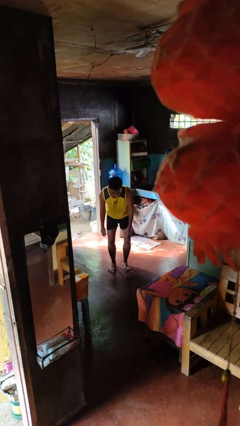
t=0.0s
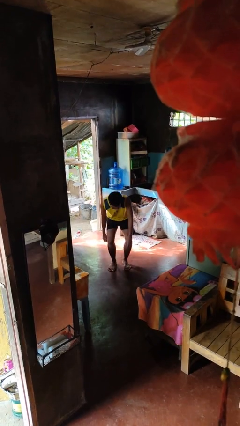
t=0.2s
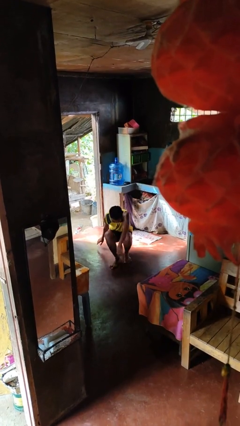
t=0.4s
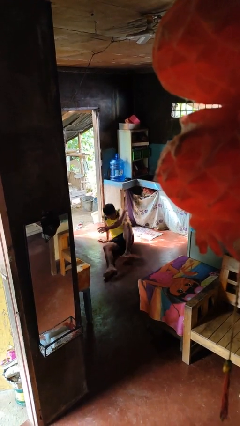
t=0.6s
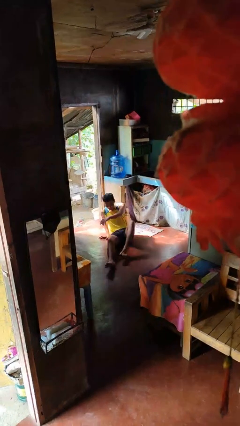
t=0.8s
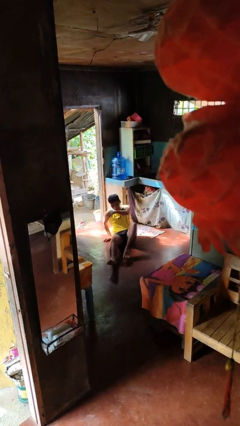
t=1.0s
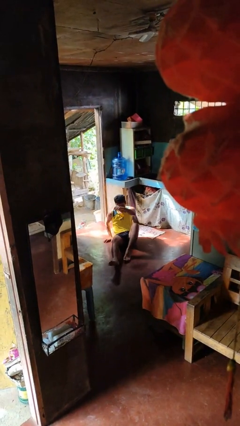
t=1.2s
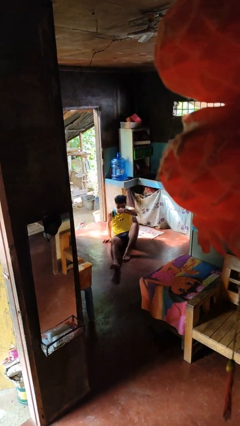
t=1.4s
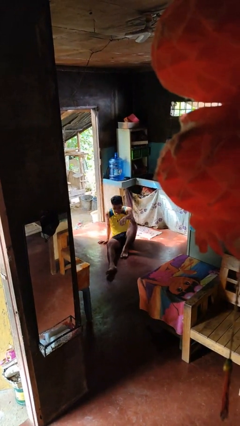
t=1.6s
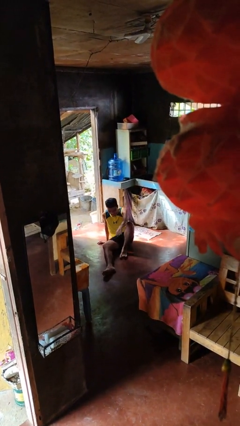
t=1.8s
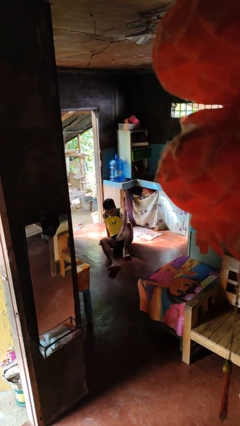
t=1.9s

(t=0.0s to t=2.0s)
person falls while standing

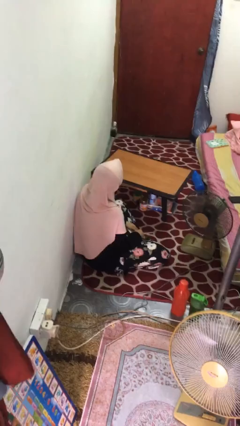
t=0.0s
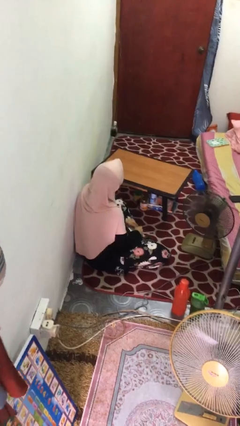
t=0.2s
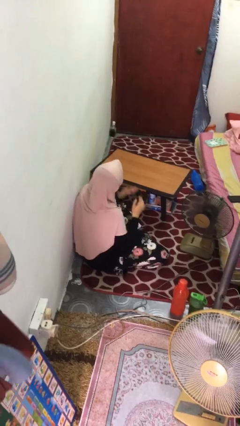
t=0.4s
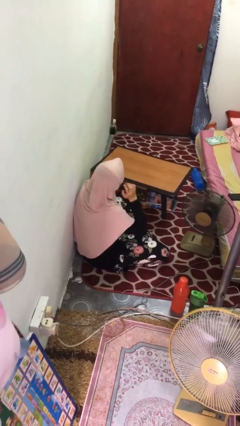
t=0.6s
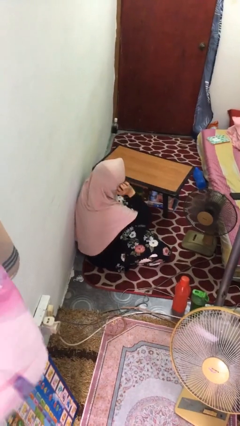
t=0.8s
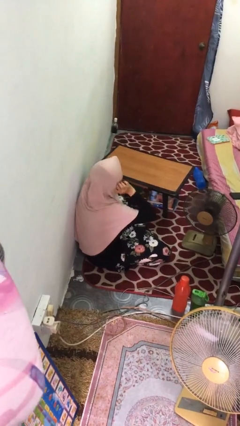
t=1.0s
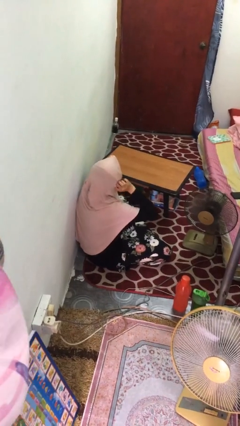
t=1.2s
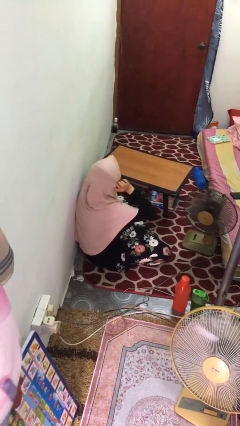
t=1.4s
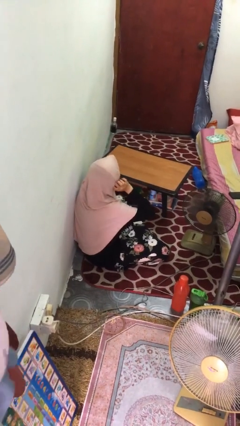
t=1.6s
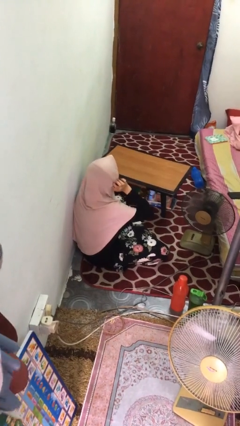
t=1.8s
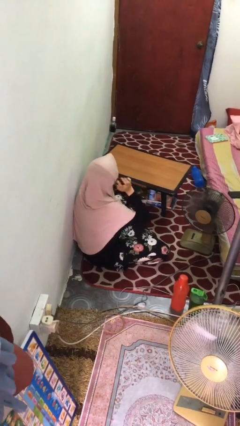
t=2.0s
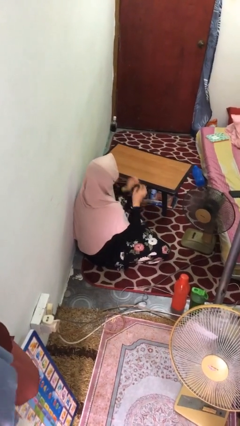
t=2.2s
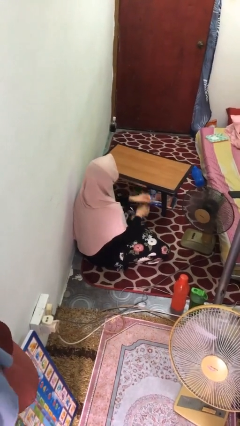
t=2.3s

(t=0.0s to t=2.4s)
person puts fingers in ear

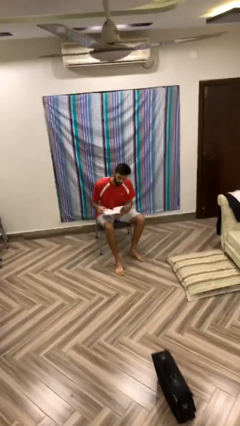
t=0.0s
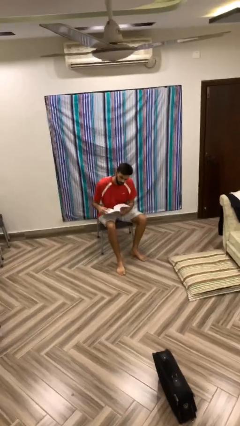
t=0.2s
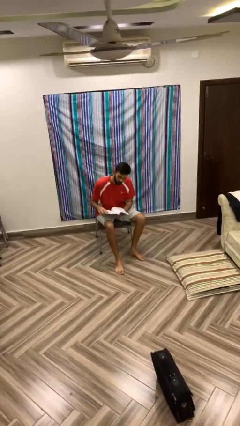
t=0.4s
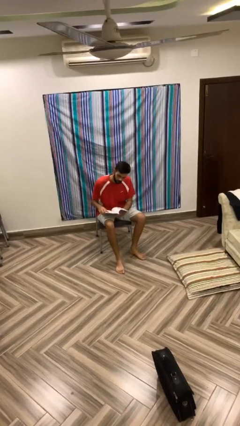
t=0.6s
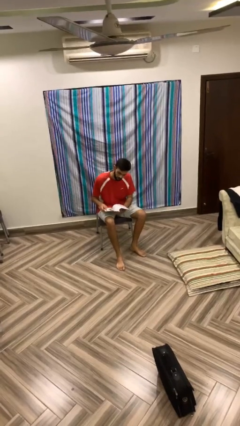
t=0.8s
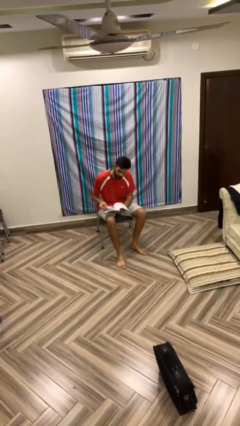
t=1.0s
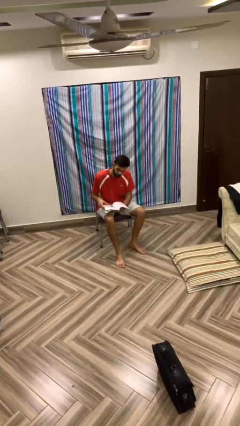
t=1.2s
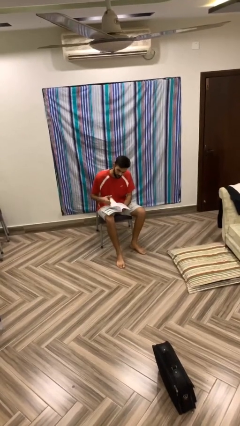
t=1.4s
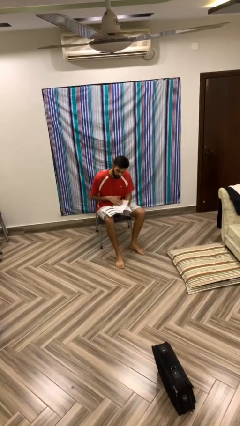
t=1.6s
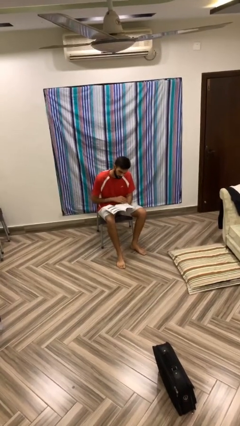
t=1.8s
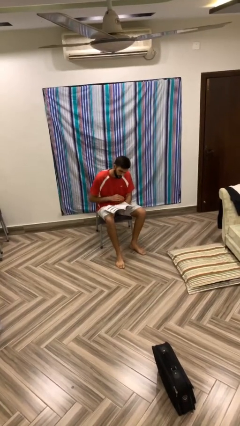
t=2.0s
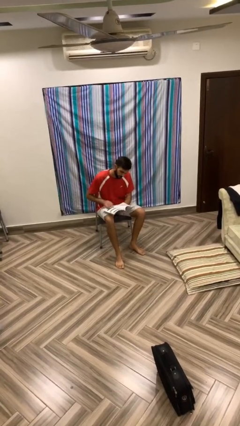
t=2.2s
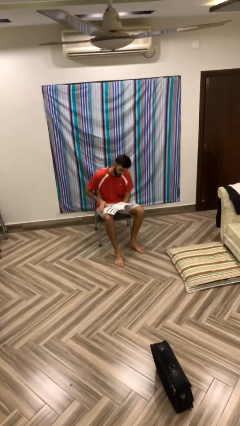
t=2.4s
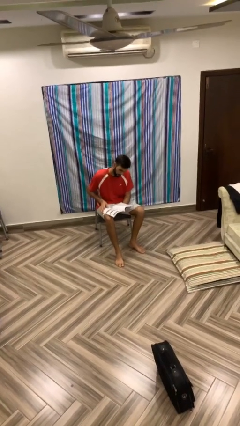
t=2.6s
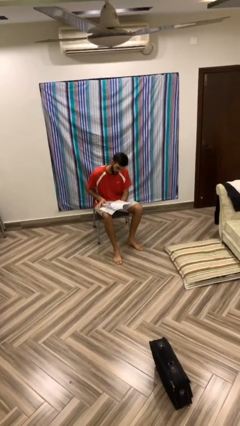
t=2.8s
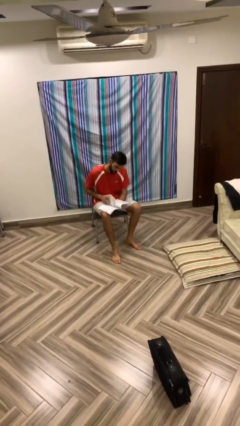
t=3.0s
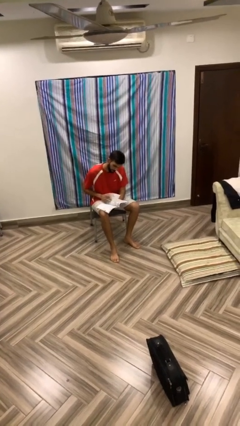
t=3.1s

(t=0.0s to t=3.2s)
person reads document

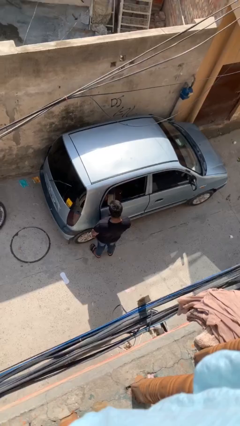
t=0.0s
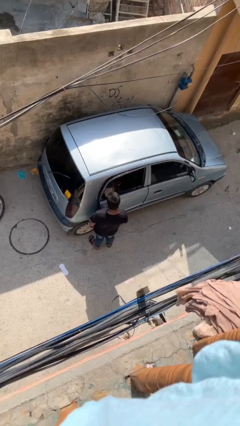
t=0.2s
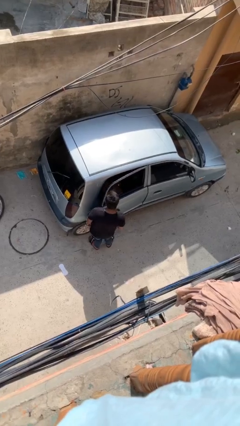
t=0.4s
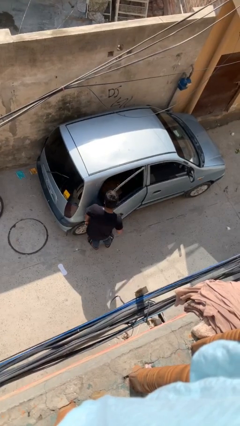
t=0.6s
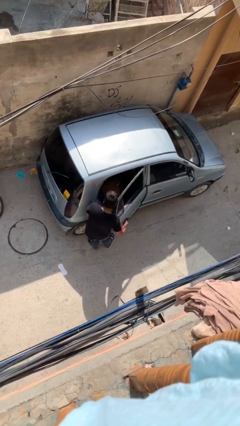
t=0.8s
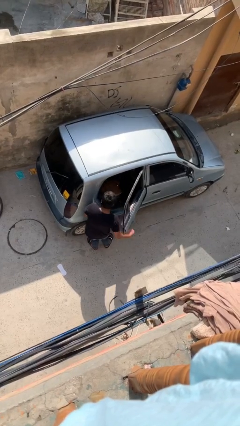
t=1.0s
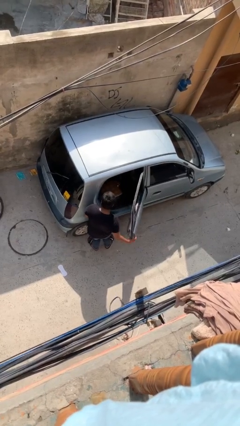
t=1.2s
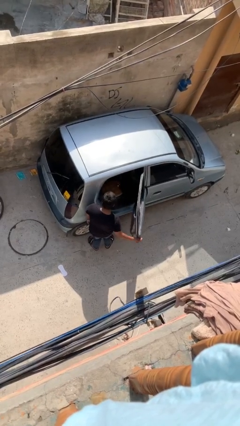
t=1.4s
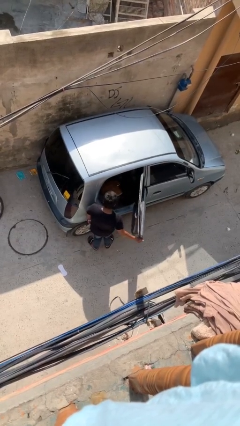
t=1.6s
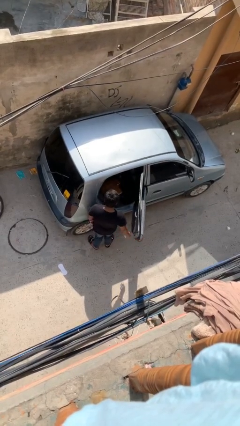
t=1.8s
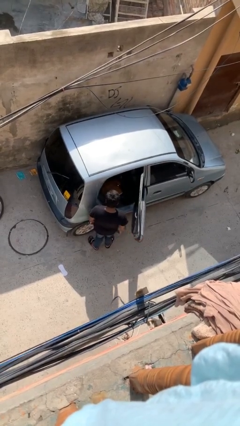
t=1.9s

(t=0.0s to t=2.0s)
person opens car door

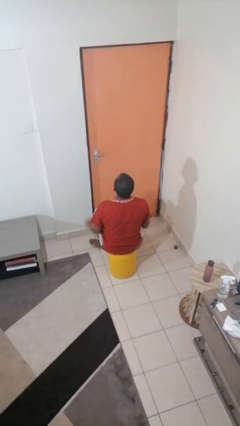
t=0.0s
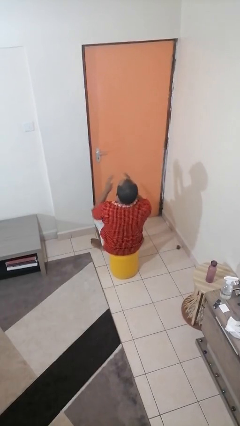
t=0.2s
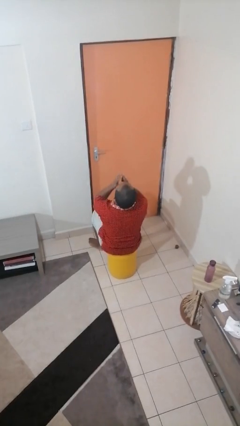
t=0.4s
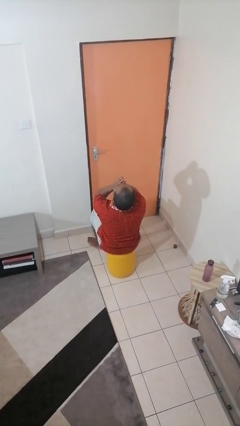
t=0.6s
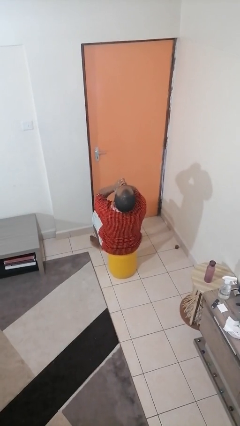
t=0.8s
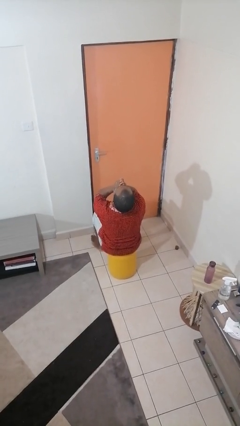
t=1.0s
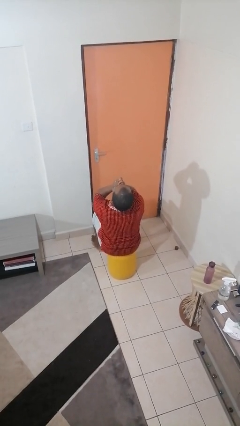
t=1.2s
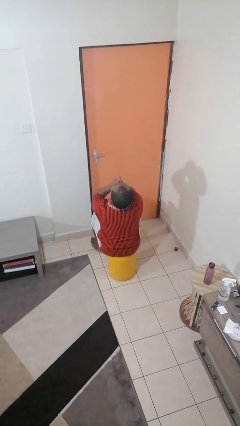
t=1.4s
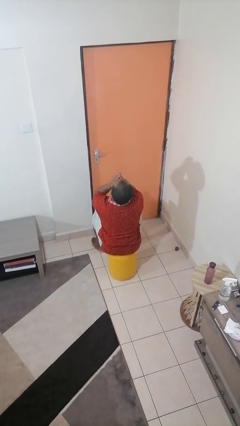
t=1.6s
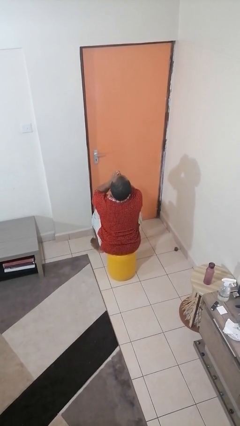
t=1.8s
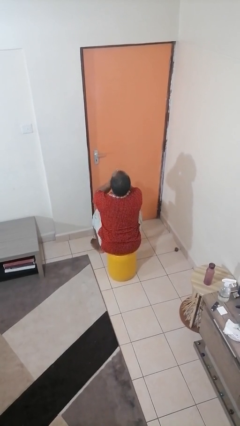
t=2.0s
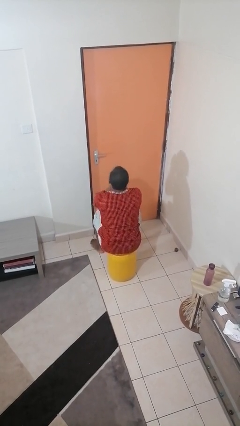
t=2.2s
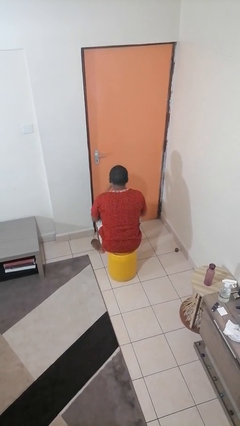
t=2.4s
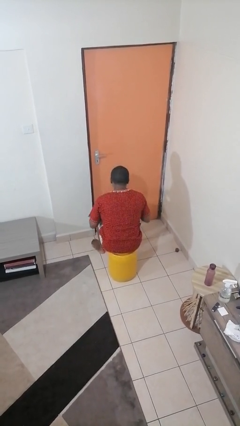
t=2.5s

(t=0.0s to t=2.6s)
person yawns

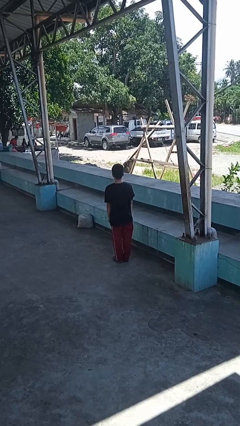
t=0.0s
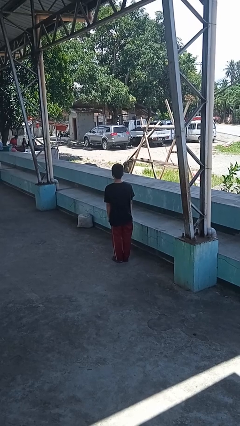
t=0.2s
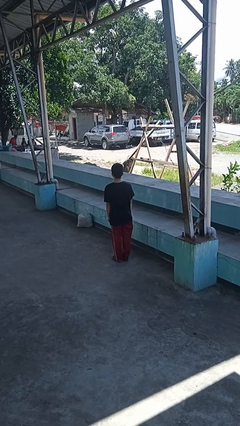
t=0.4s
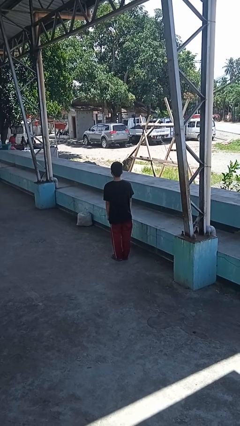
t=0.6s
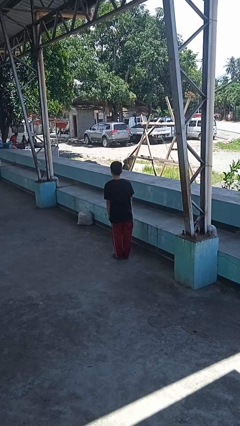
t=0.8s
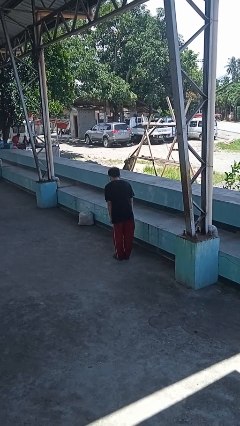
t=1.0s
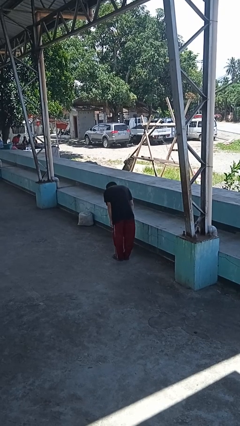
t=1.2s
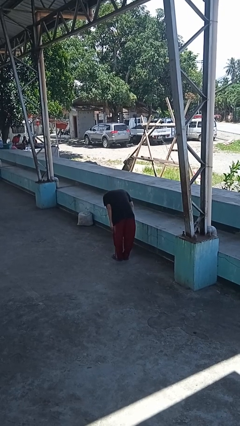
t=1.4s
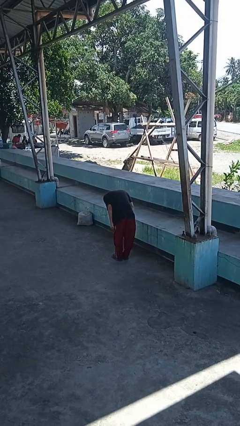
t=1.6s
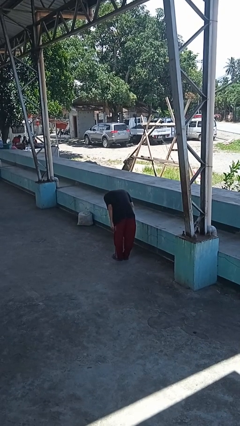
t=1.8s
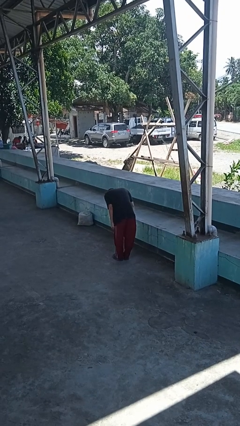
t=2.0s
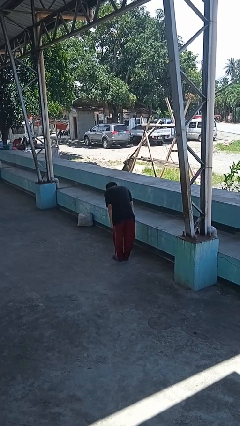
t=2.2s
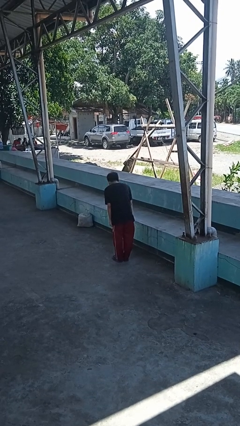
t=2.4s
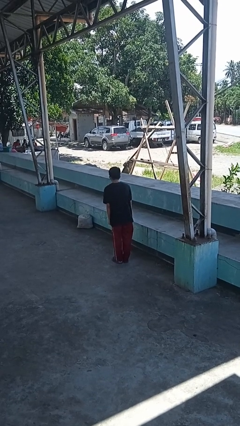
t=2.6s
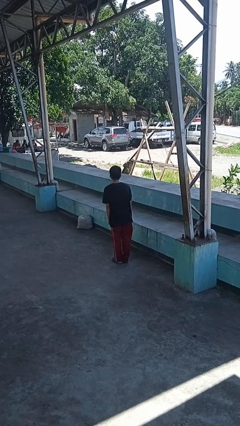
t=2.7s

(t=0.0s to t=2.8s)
person bows

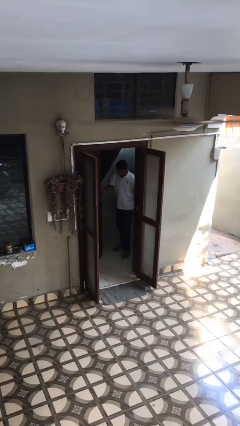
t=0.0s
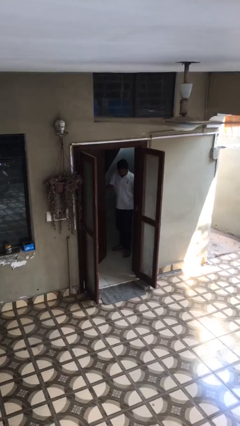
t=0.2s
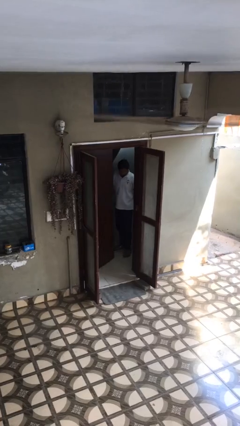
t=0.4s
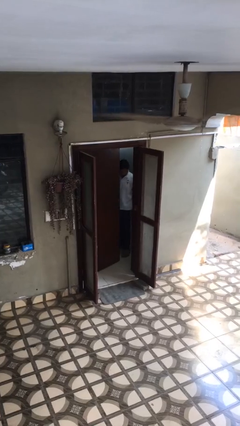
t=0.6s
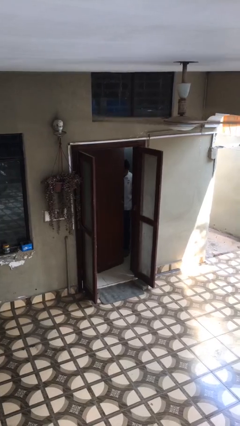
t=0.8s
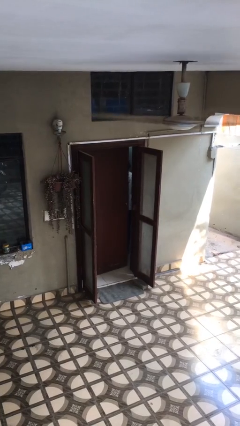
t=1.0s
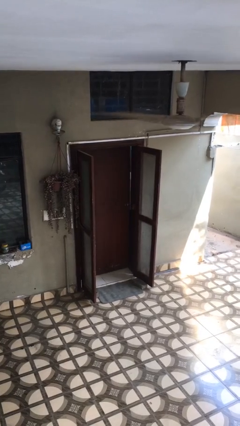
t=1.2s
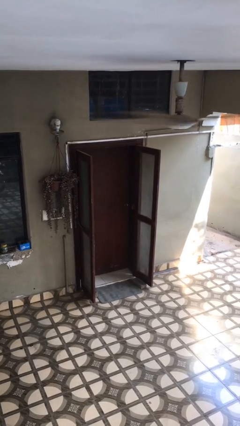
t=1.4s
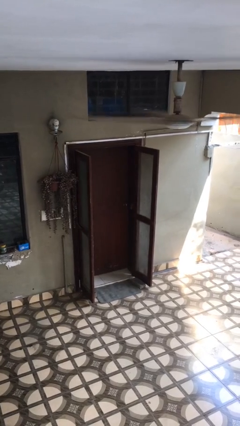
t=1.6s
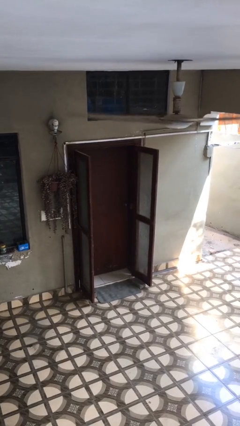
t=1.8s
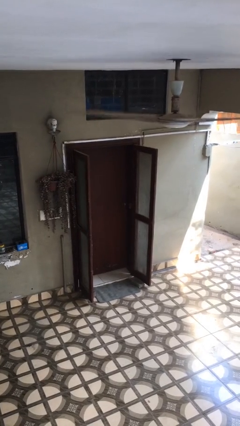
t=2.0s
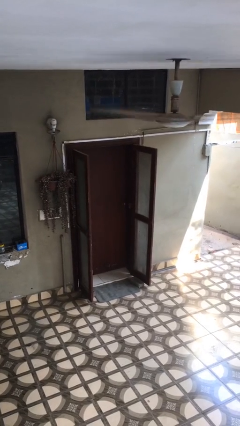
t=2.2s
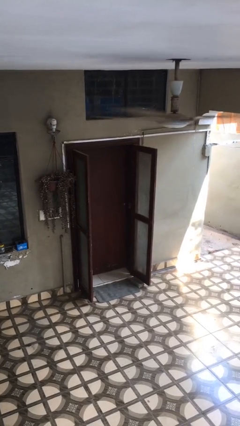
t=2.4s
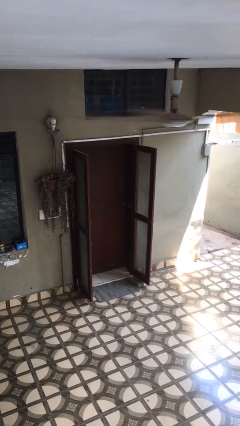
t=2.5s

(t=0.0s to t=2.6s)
person closes facility door
